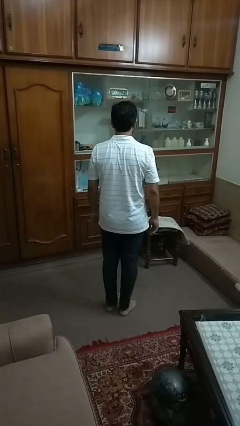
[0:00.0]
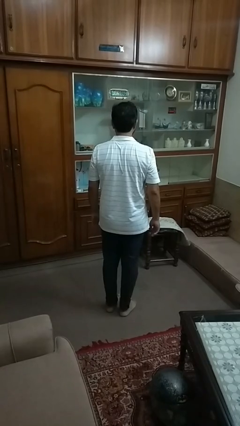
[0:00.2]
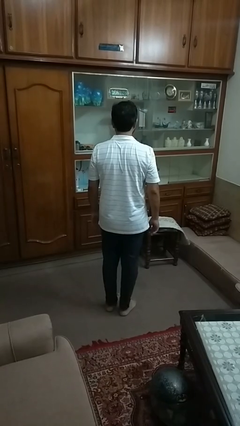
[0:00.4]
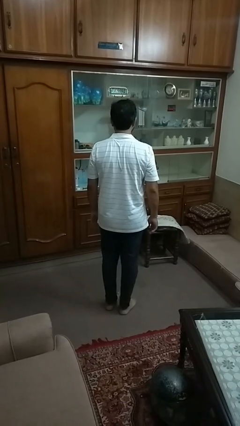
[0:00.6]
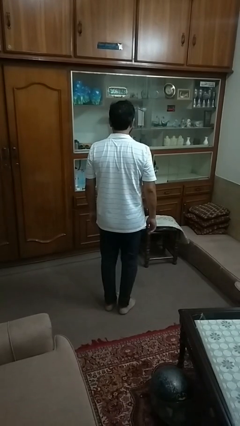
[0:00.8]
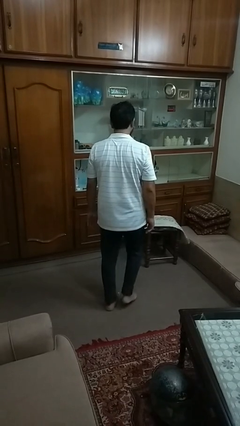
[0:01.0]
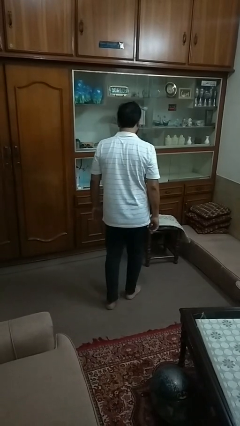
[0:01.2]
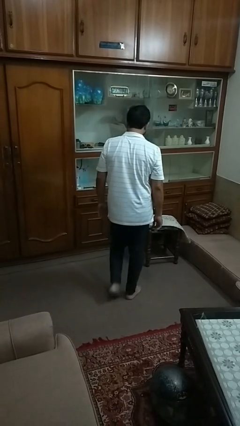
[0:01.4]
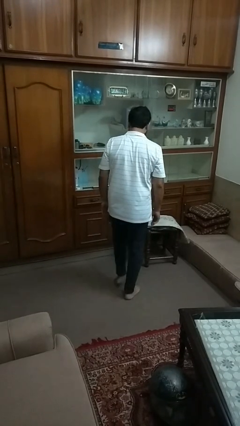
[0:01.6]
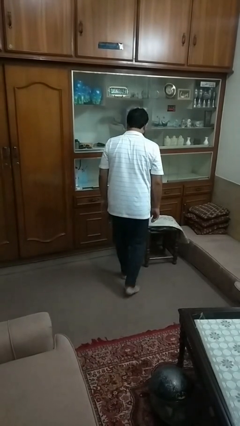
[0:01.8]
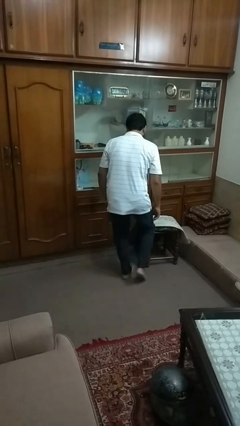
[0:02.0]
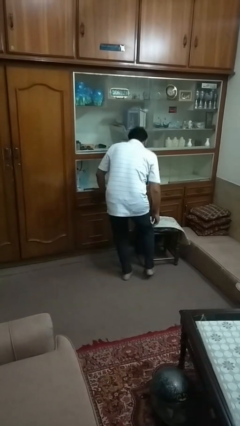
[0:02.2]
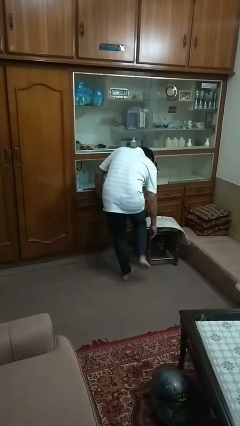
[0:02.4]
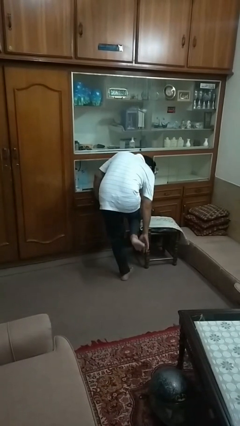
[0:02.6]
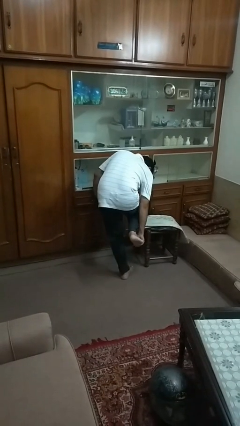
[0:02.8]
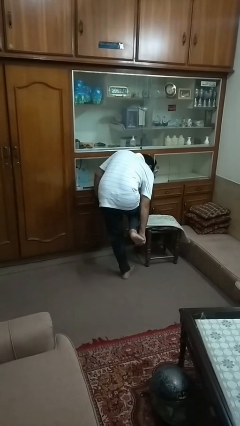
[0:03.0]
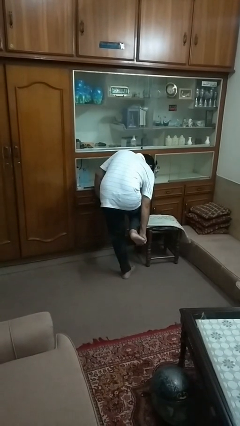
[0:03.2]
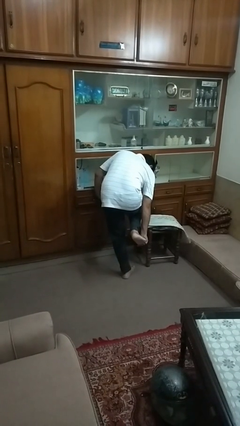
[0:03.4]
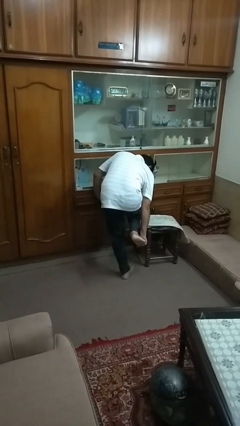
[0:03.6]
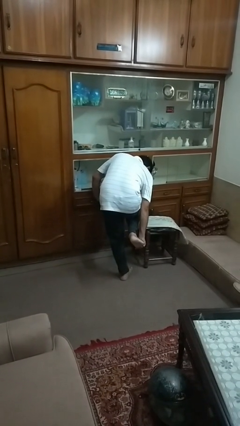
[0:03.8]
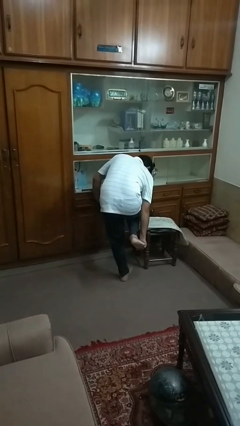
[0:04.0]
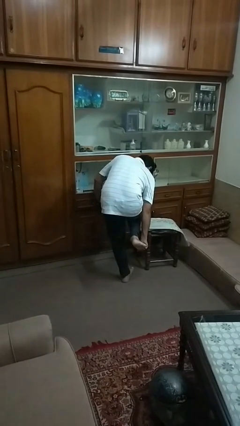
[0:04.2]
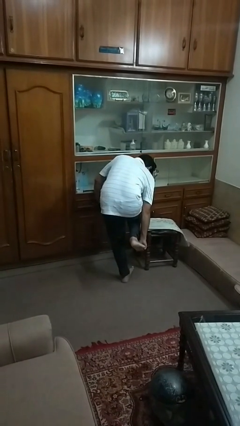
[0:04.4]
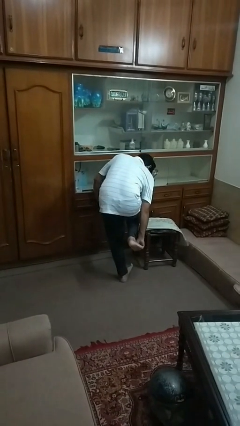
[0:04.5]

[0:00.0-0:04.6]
person stubs toe

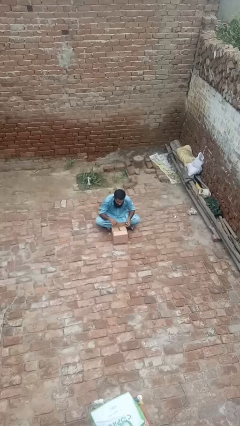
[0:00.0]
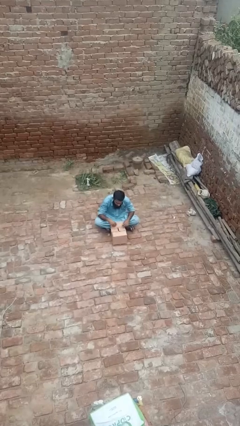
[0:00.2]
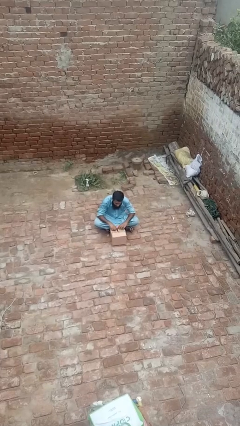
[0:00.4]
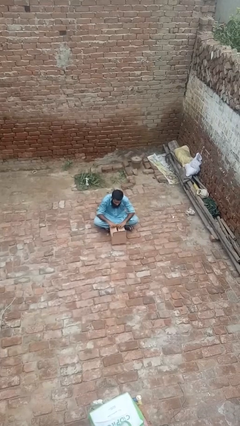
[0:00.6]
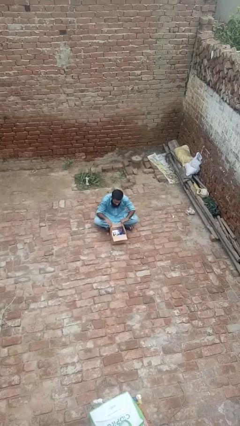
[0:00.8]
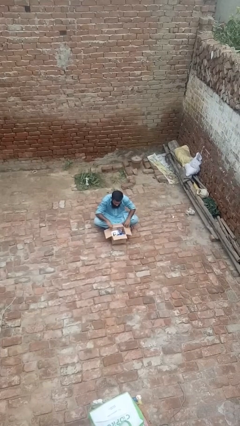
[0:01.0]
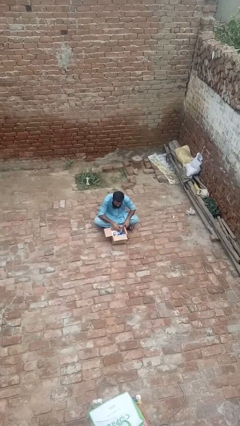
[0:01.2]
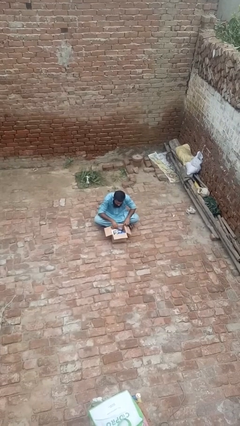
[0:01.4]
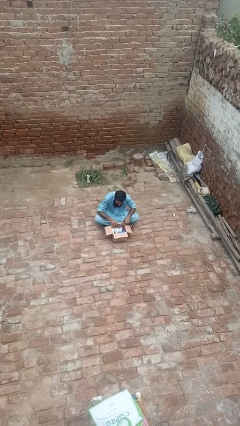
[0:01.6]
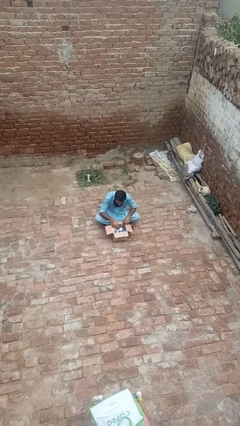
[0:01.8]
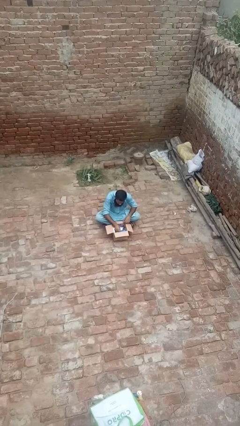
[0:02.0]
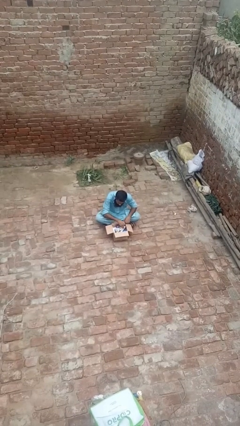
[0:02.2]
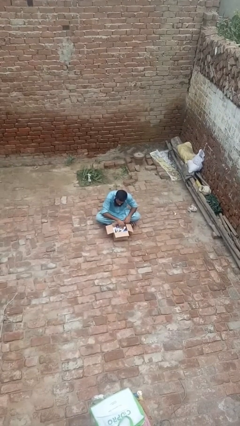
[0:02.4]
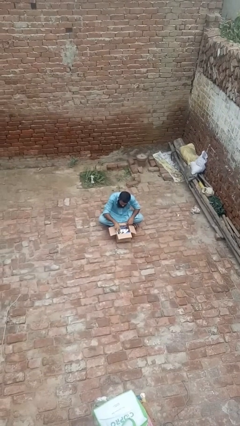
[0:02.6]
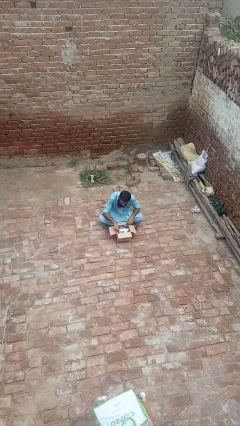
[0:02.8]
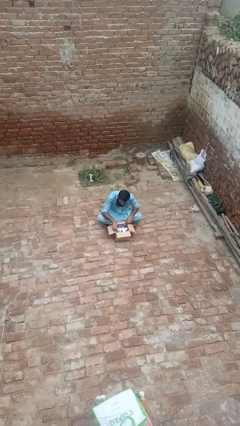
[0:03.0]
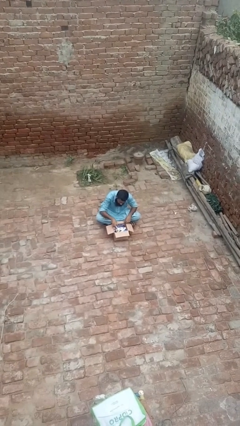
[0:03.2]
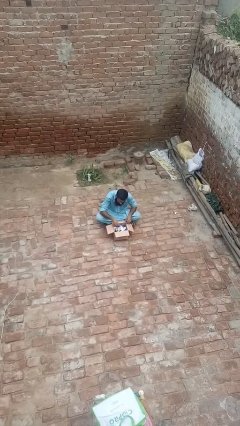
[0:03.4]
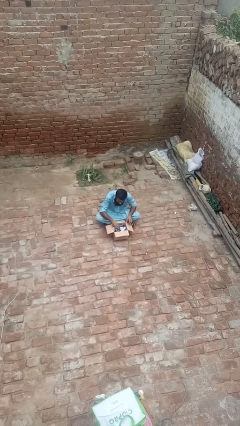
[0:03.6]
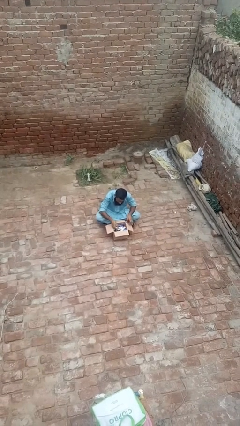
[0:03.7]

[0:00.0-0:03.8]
person searches in box

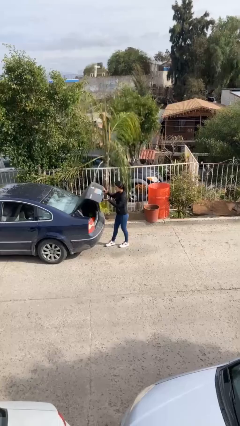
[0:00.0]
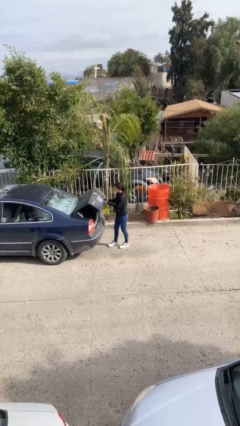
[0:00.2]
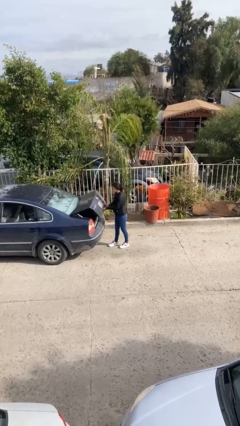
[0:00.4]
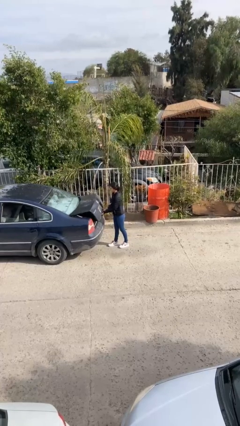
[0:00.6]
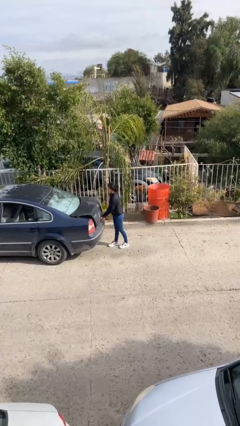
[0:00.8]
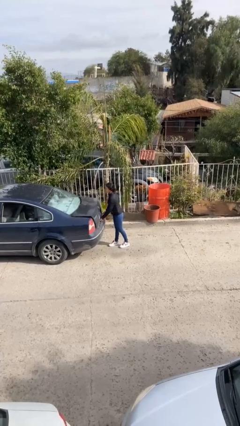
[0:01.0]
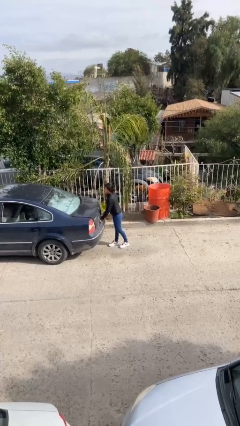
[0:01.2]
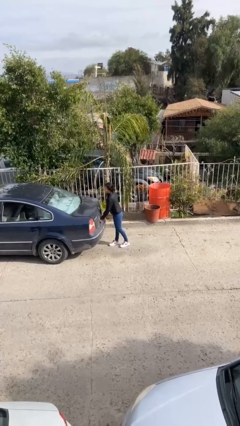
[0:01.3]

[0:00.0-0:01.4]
person closes car trunk

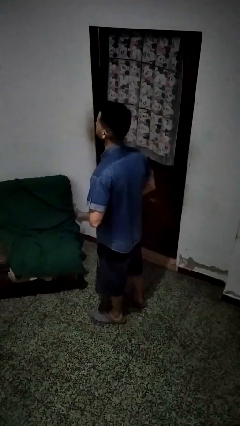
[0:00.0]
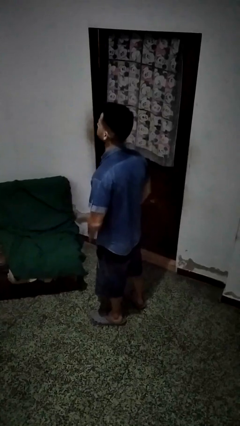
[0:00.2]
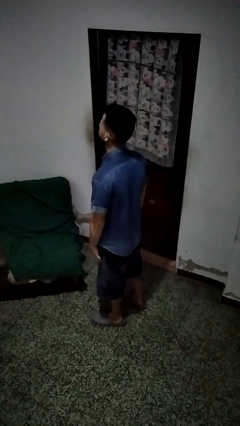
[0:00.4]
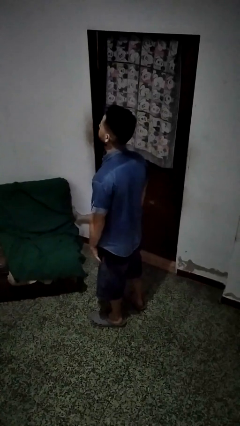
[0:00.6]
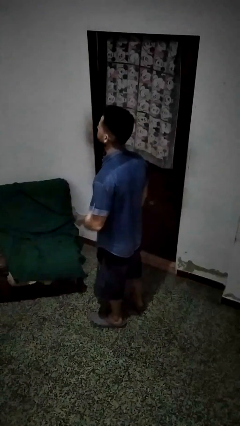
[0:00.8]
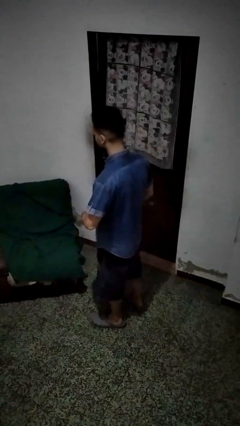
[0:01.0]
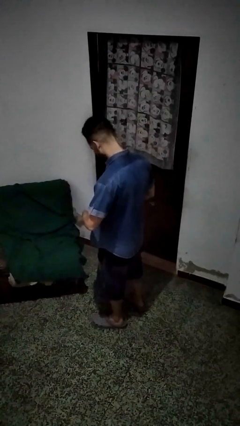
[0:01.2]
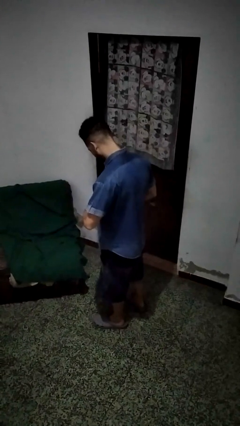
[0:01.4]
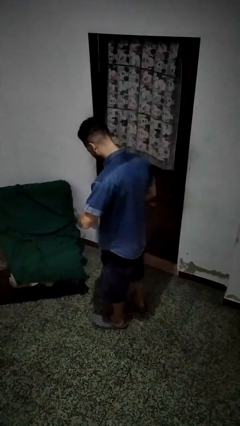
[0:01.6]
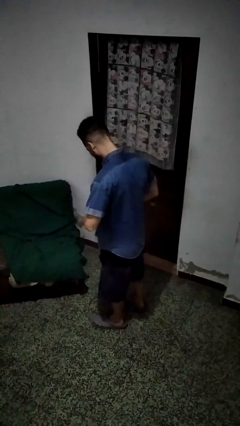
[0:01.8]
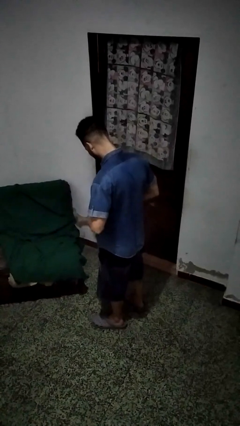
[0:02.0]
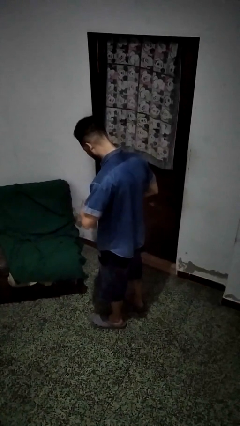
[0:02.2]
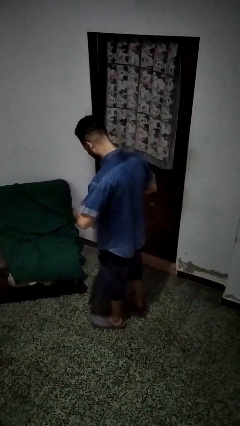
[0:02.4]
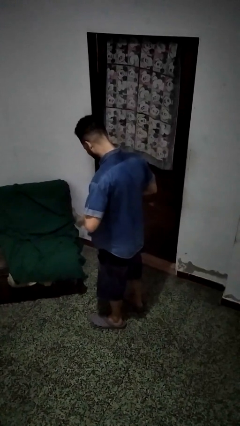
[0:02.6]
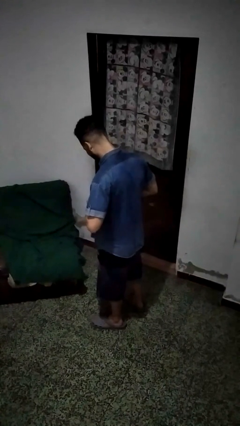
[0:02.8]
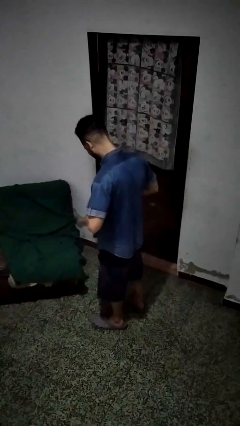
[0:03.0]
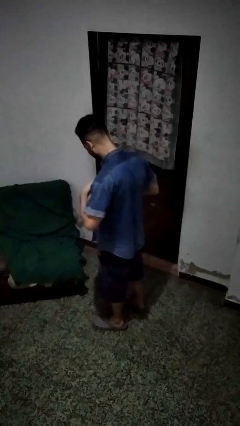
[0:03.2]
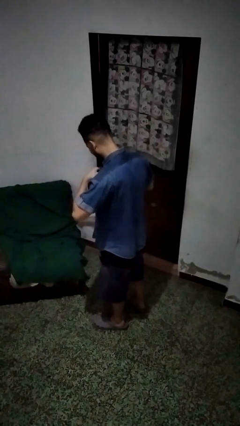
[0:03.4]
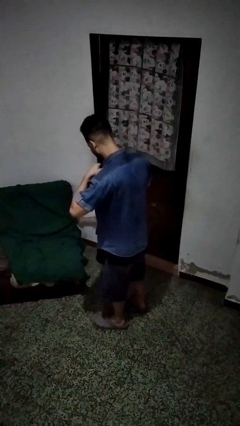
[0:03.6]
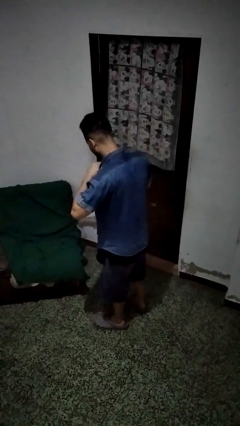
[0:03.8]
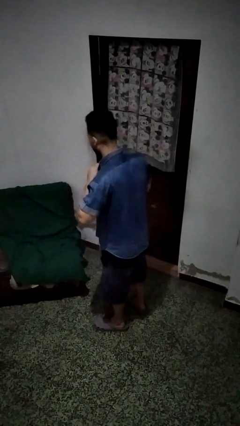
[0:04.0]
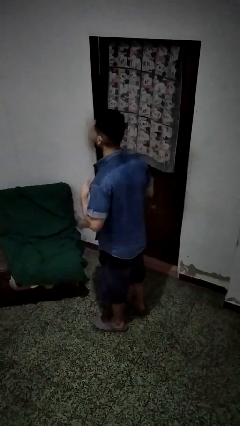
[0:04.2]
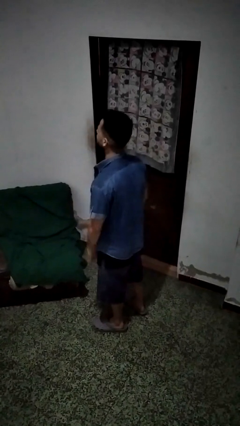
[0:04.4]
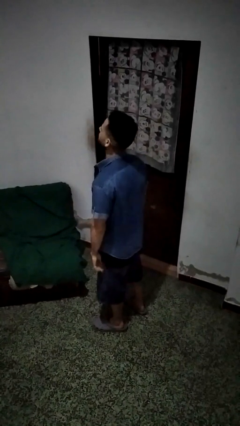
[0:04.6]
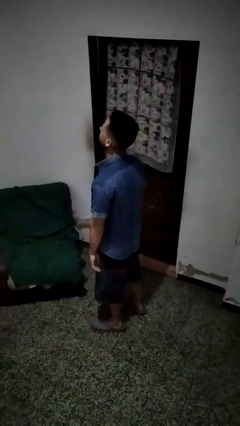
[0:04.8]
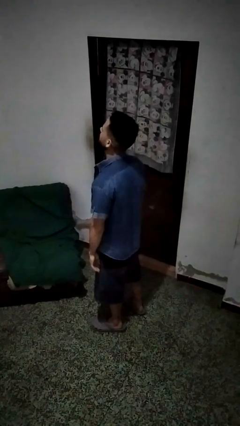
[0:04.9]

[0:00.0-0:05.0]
person unbuttons shirt

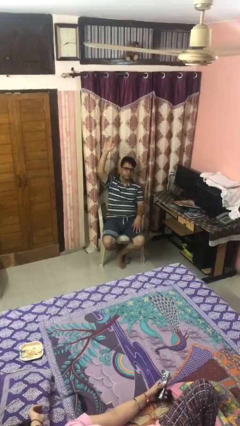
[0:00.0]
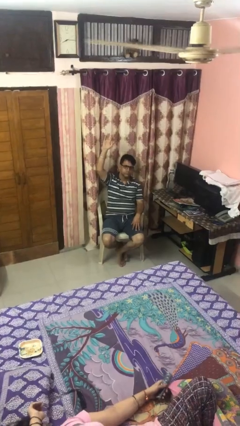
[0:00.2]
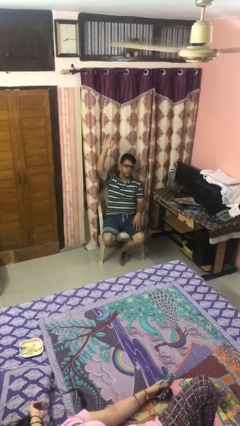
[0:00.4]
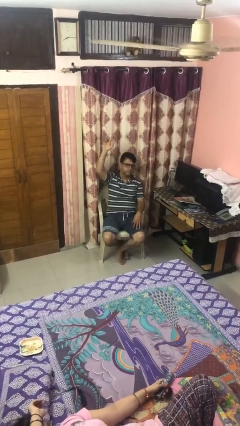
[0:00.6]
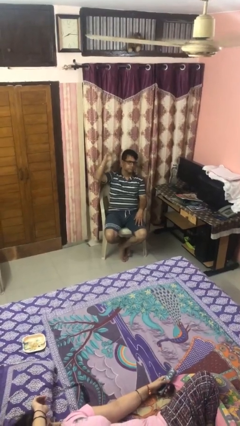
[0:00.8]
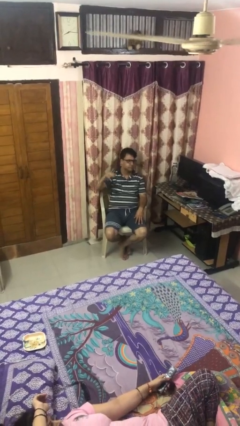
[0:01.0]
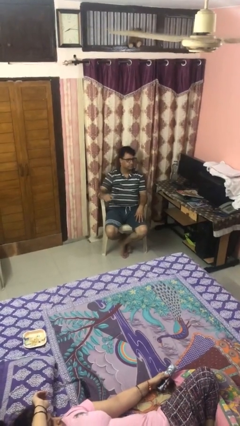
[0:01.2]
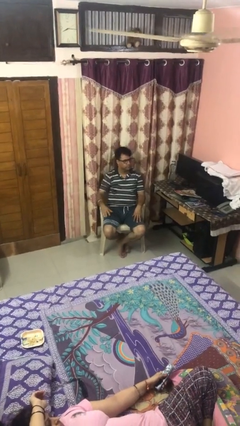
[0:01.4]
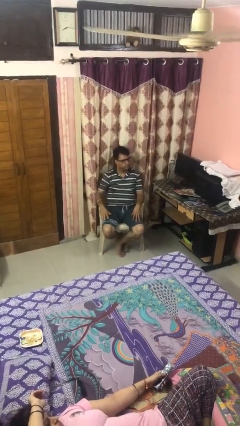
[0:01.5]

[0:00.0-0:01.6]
person gestures lower hand

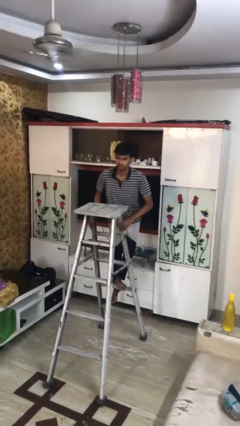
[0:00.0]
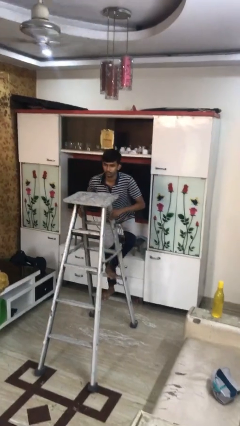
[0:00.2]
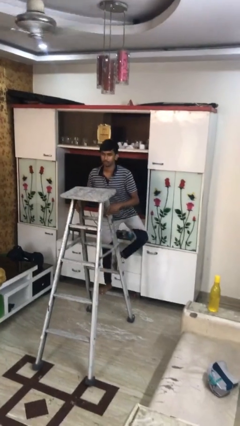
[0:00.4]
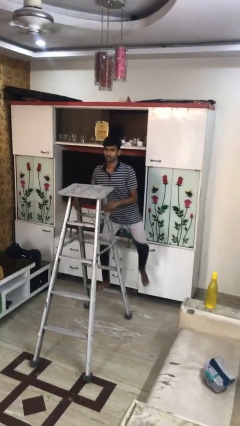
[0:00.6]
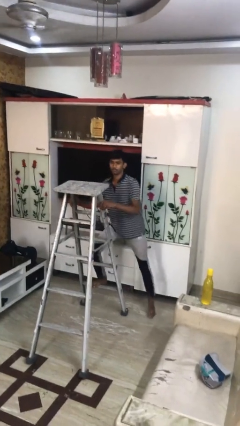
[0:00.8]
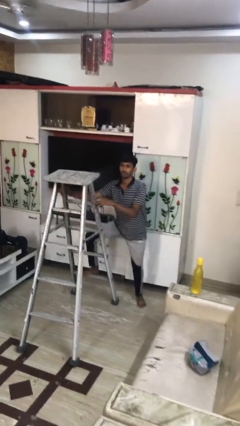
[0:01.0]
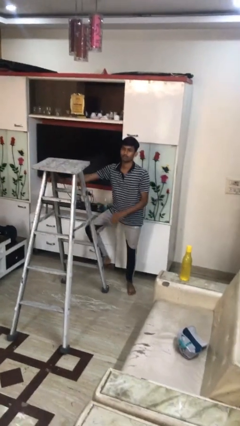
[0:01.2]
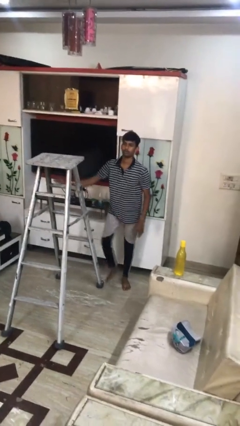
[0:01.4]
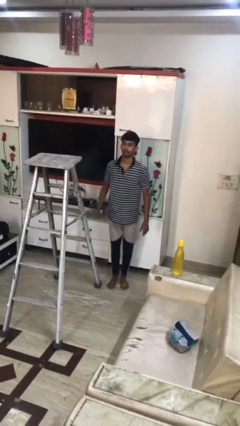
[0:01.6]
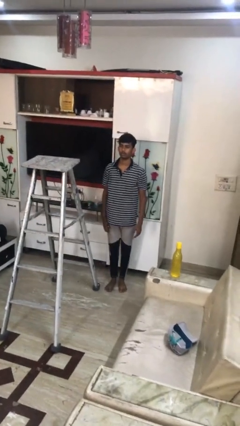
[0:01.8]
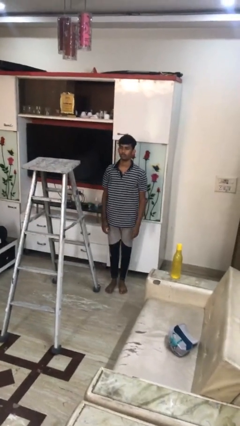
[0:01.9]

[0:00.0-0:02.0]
person climbs down ladder
